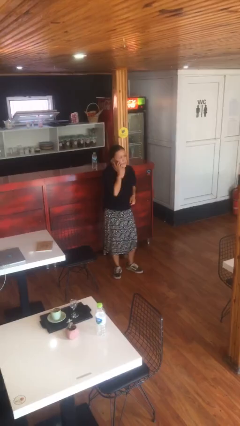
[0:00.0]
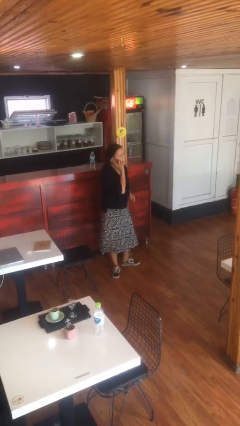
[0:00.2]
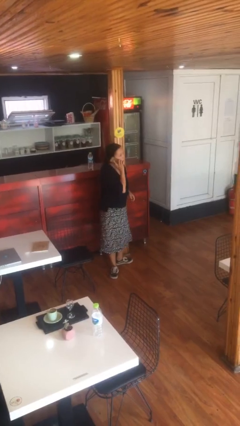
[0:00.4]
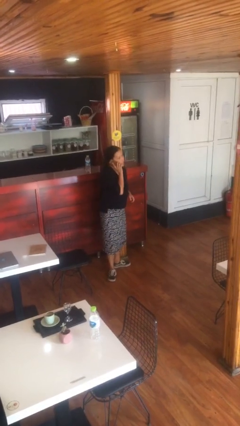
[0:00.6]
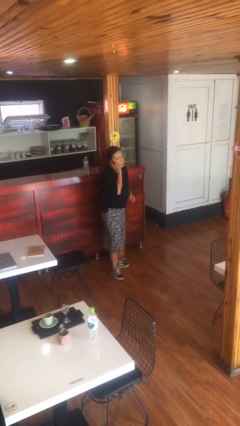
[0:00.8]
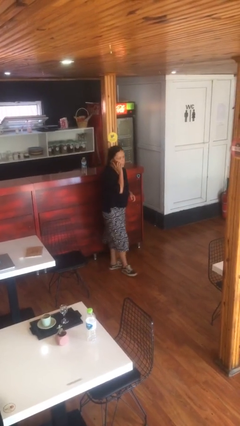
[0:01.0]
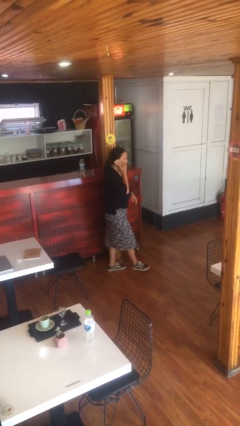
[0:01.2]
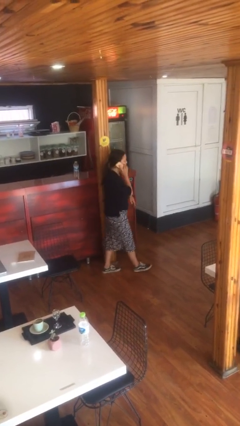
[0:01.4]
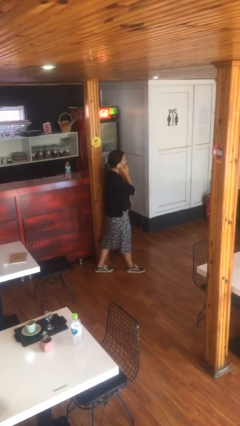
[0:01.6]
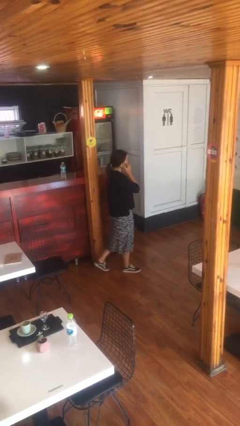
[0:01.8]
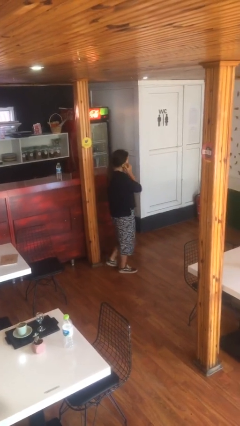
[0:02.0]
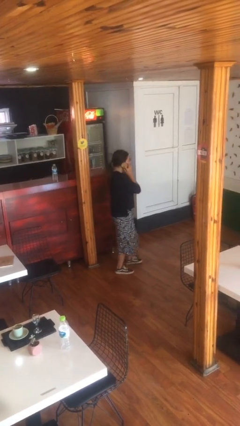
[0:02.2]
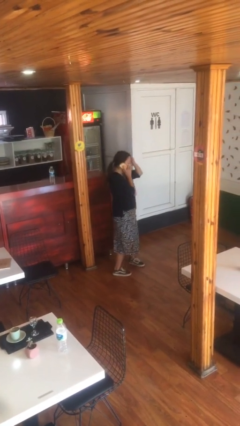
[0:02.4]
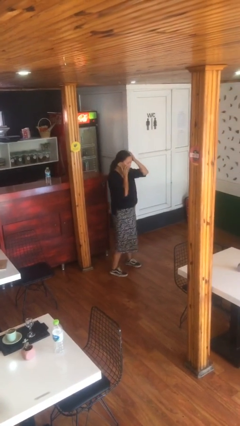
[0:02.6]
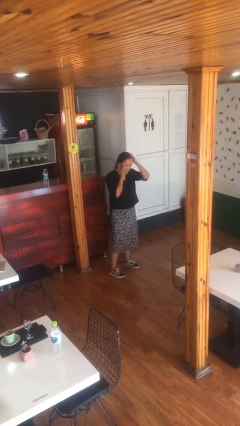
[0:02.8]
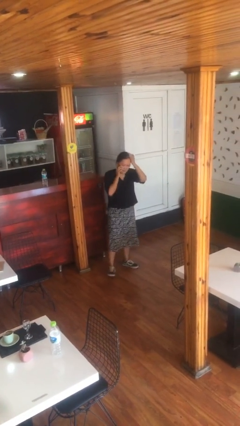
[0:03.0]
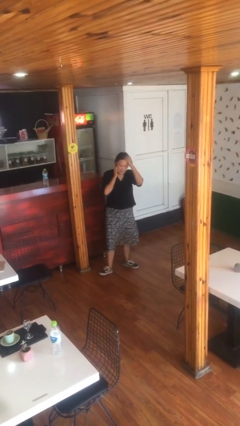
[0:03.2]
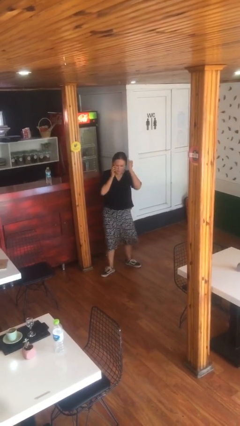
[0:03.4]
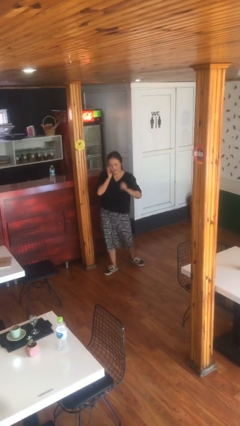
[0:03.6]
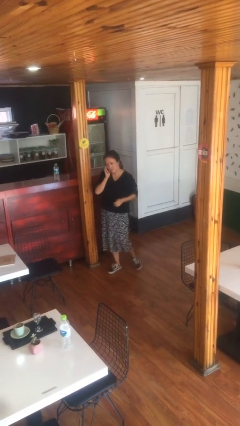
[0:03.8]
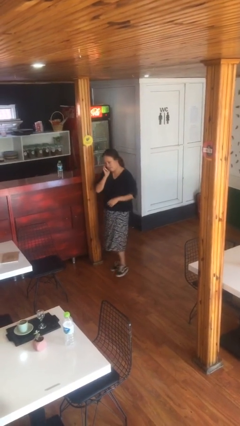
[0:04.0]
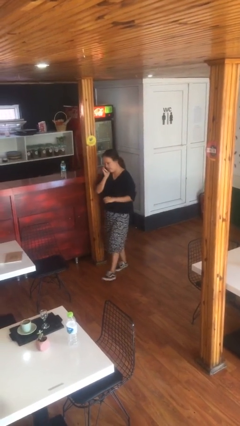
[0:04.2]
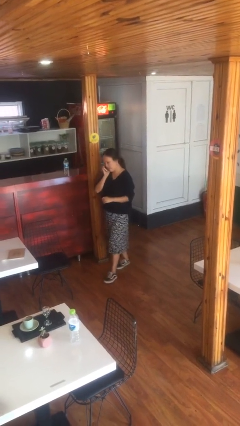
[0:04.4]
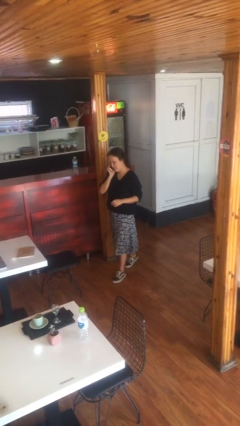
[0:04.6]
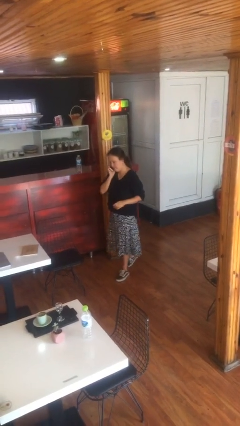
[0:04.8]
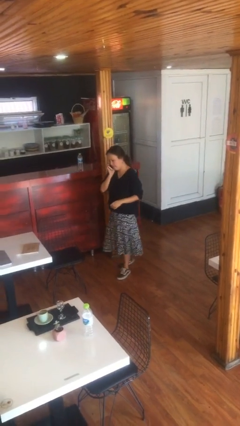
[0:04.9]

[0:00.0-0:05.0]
person talks on phone

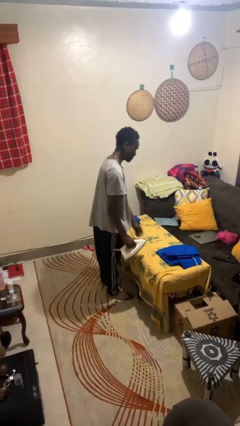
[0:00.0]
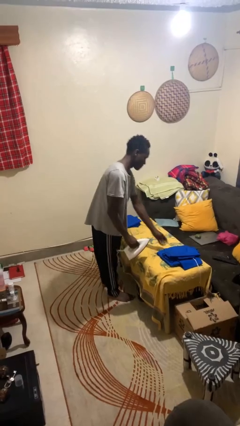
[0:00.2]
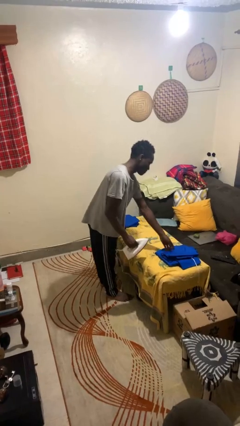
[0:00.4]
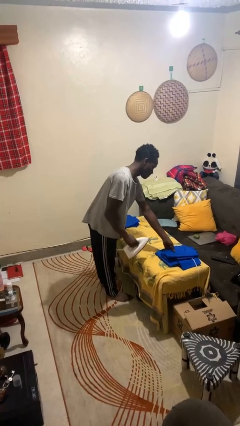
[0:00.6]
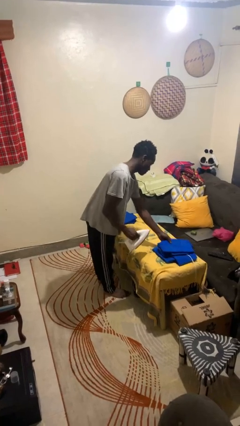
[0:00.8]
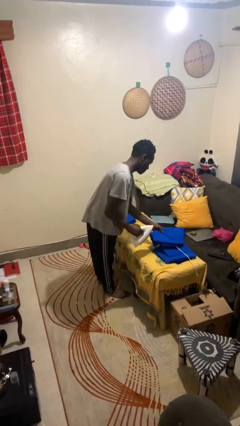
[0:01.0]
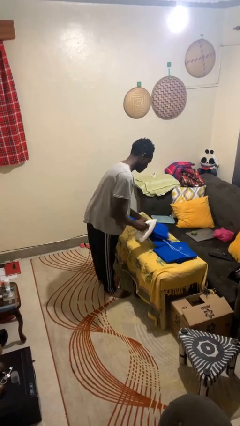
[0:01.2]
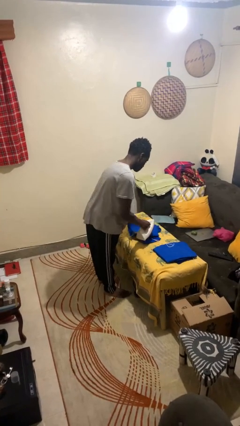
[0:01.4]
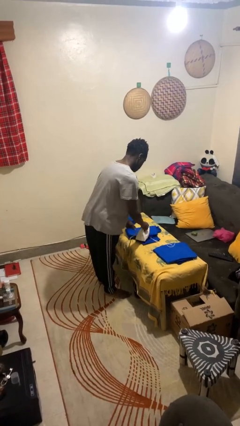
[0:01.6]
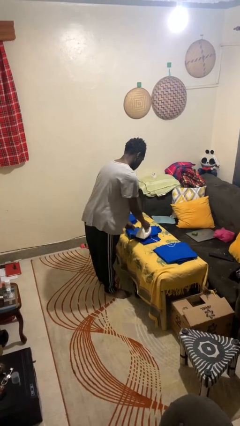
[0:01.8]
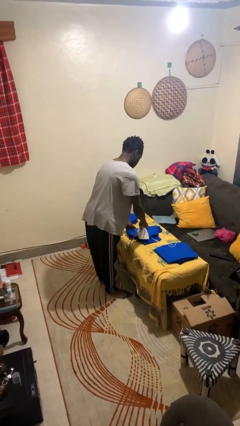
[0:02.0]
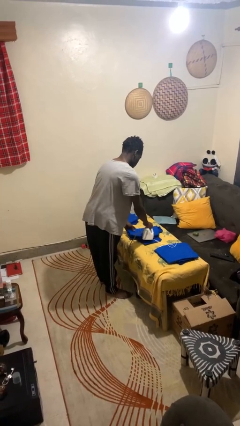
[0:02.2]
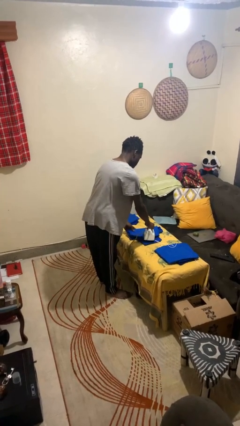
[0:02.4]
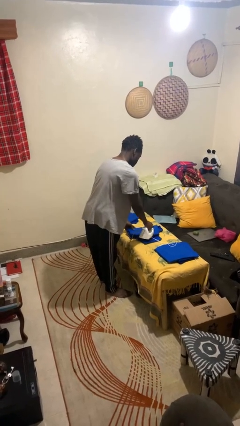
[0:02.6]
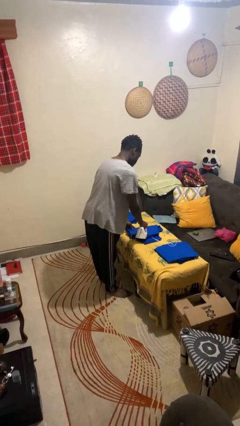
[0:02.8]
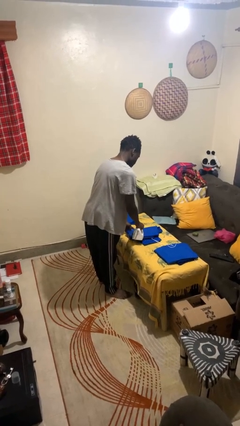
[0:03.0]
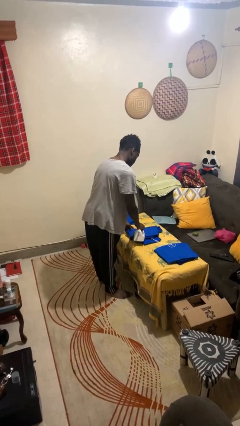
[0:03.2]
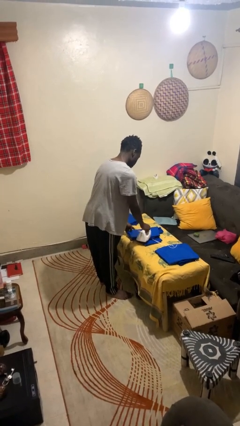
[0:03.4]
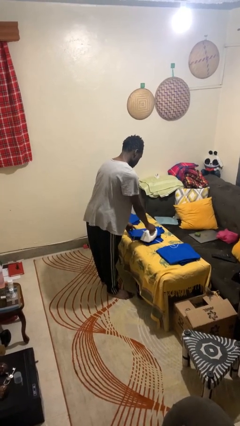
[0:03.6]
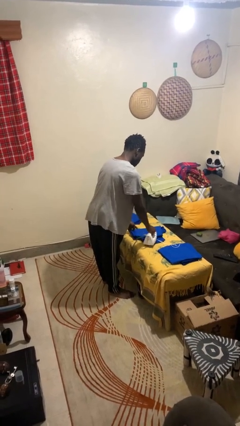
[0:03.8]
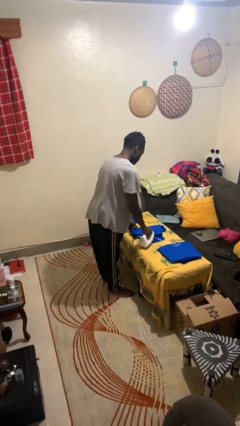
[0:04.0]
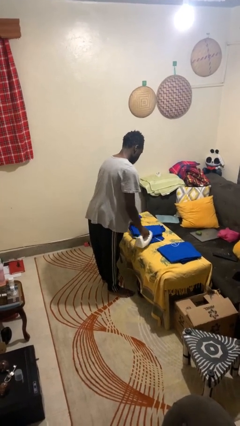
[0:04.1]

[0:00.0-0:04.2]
person irons clothes

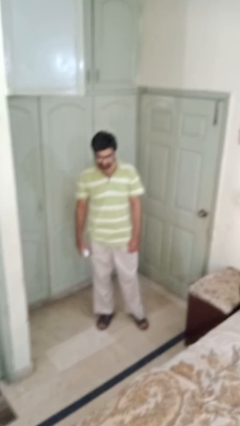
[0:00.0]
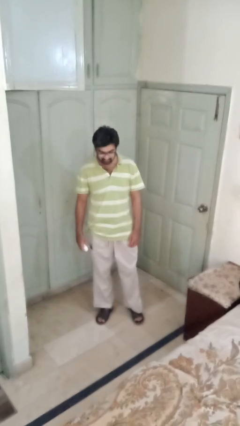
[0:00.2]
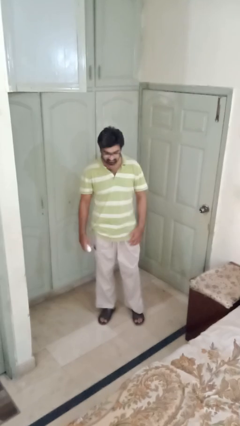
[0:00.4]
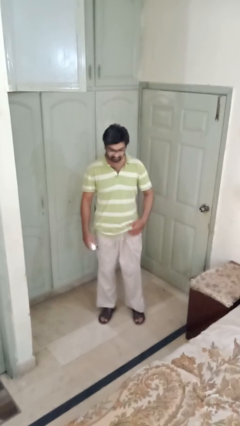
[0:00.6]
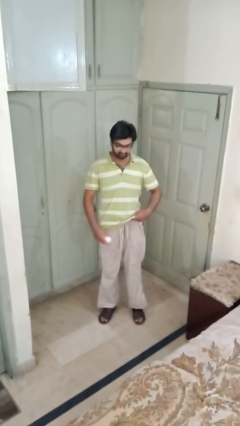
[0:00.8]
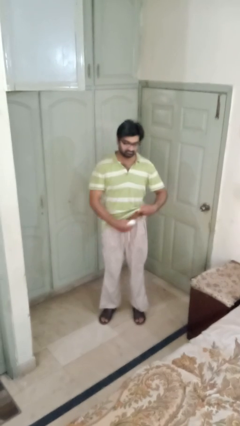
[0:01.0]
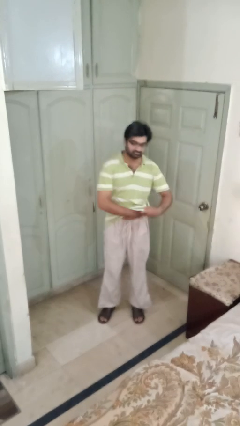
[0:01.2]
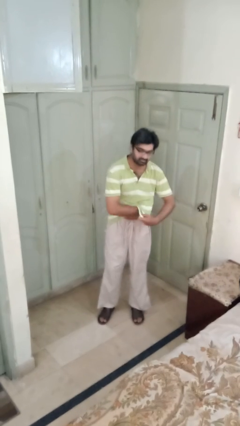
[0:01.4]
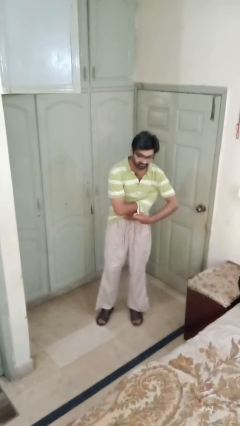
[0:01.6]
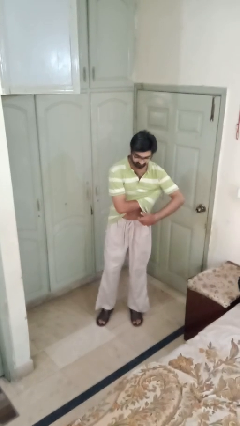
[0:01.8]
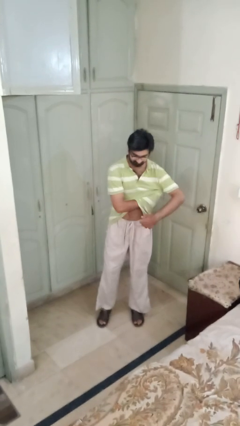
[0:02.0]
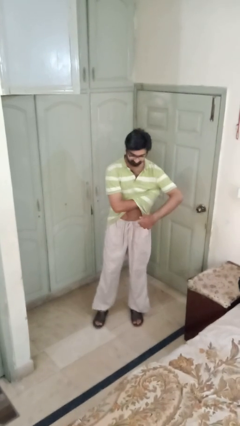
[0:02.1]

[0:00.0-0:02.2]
person applies deodorant

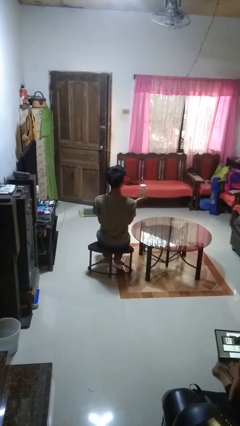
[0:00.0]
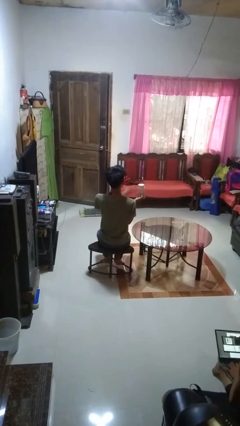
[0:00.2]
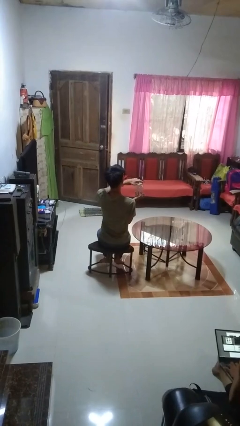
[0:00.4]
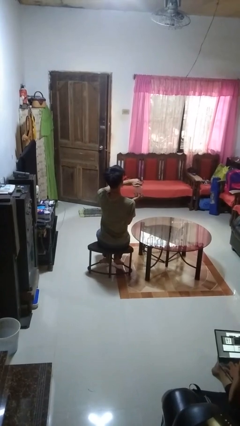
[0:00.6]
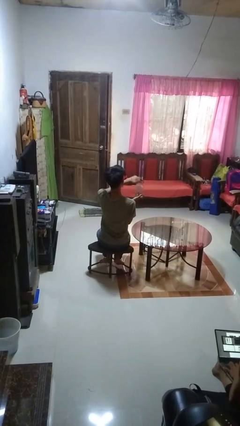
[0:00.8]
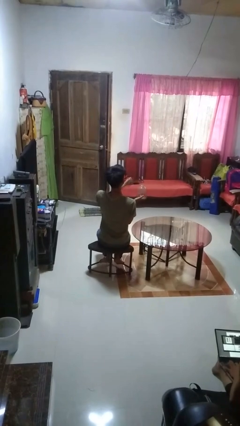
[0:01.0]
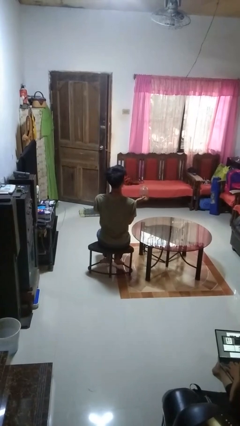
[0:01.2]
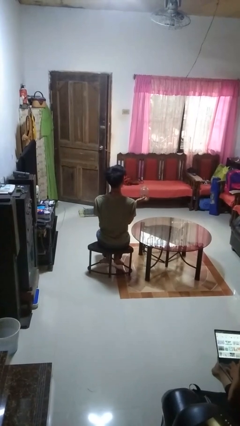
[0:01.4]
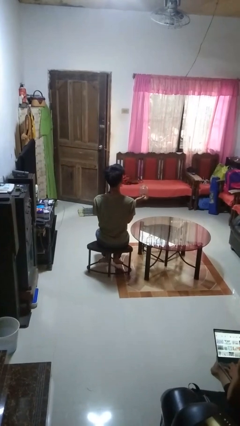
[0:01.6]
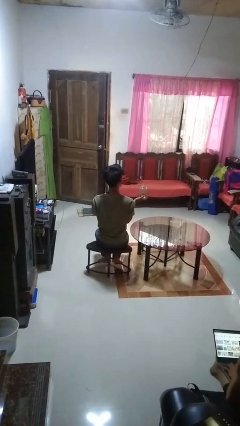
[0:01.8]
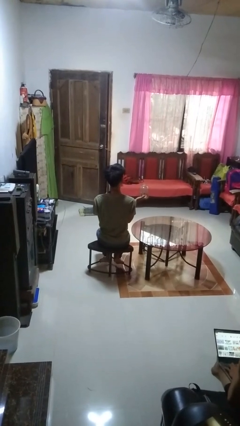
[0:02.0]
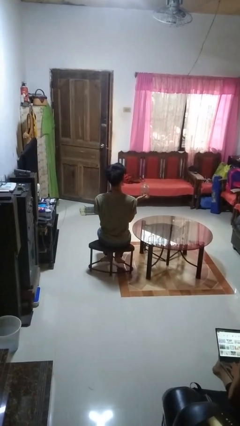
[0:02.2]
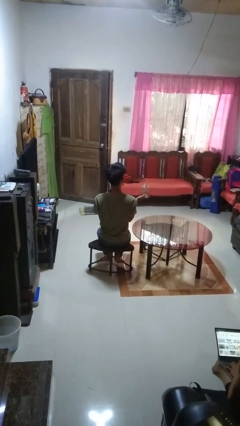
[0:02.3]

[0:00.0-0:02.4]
person opens jar

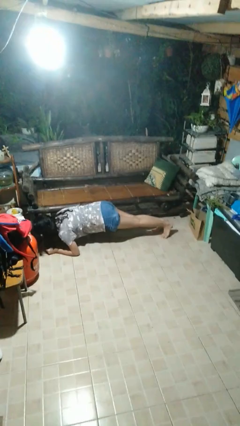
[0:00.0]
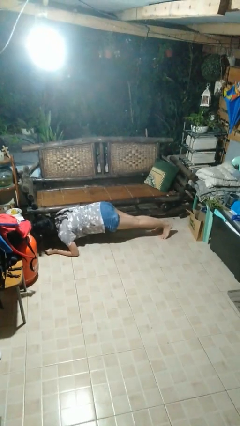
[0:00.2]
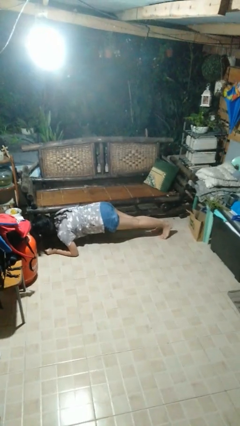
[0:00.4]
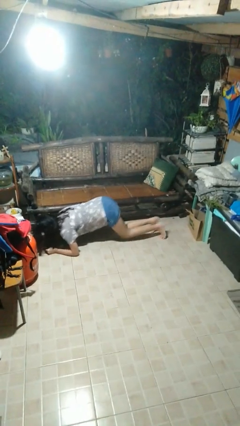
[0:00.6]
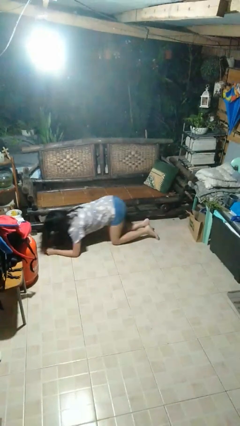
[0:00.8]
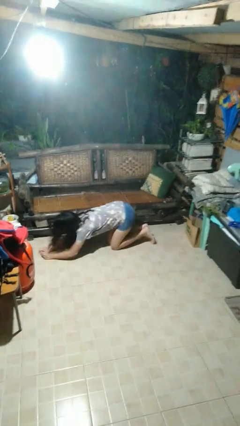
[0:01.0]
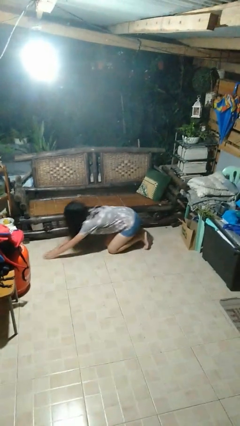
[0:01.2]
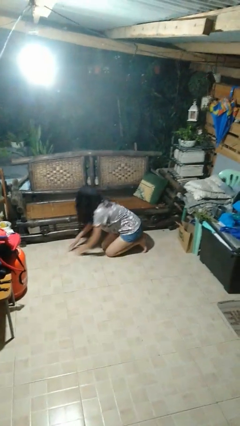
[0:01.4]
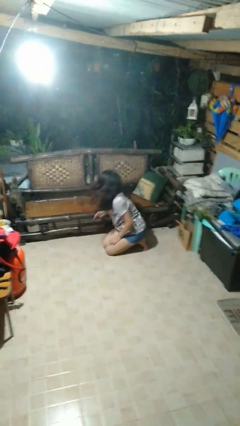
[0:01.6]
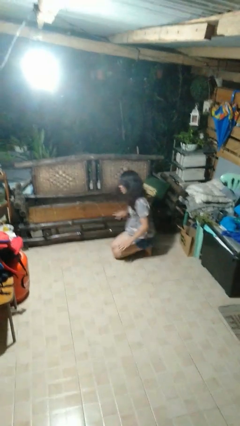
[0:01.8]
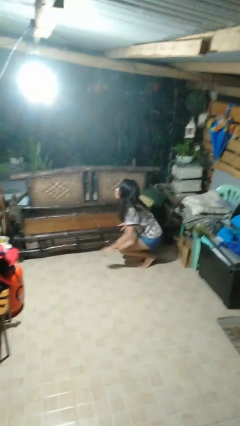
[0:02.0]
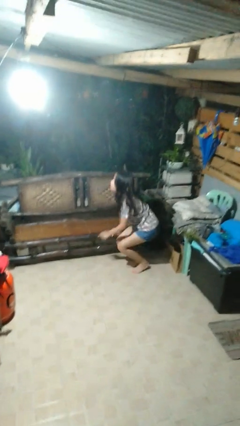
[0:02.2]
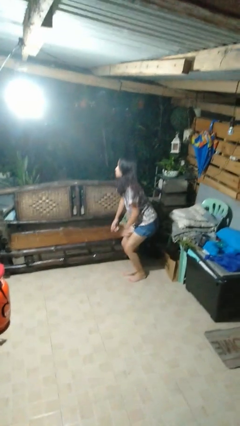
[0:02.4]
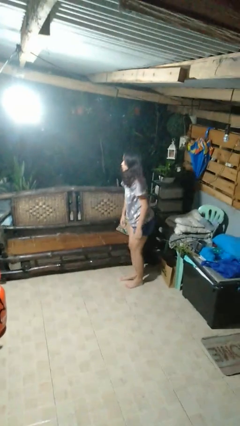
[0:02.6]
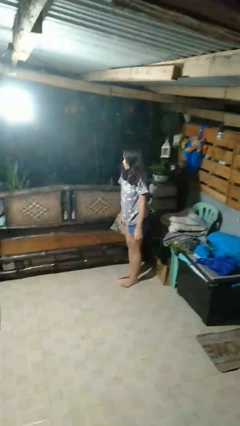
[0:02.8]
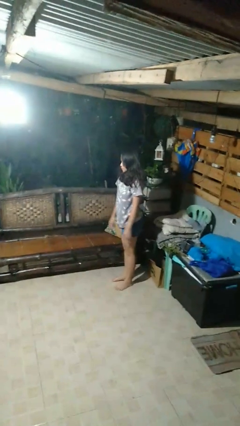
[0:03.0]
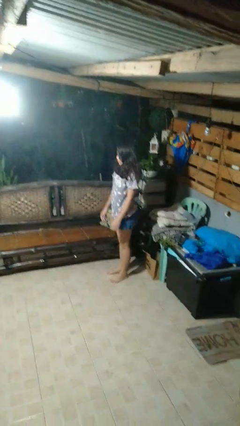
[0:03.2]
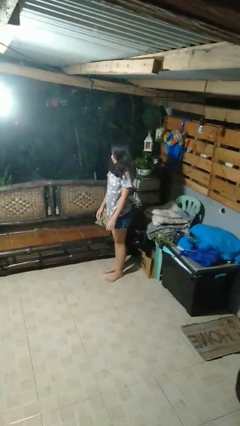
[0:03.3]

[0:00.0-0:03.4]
person stands up from floor

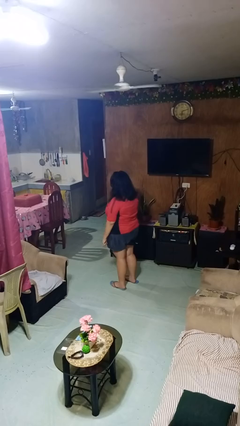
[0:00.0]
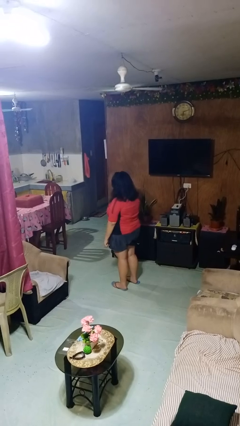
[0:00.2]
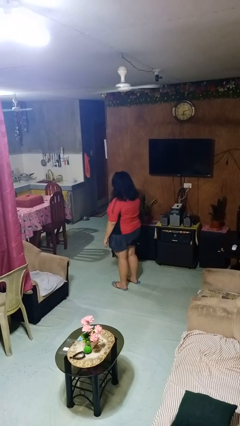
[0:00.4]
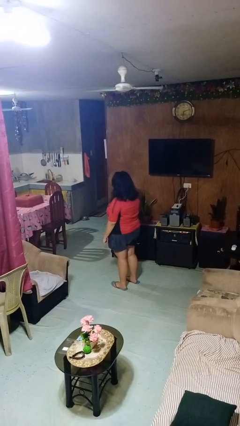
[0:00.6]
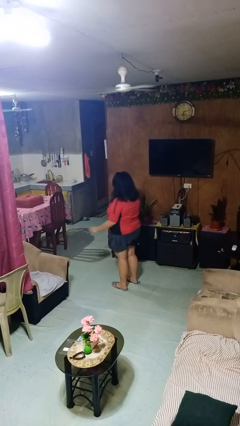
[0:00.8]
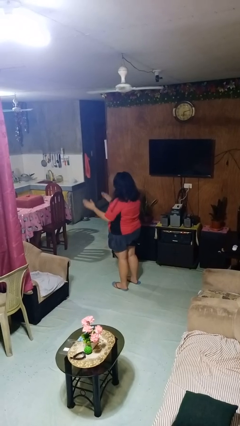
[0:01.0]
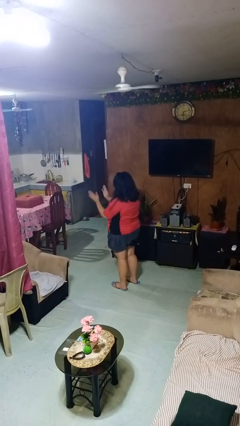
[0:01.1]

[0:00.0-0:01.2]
person claps hands
